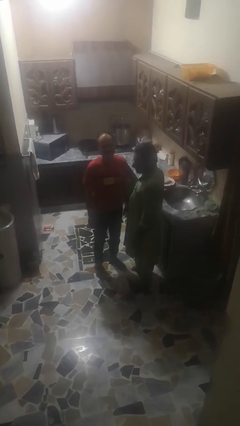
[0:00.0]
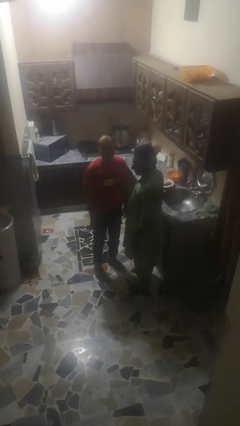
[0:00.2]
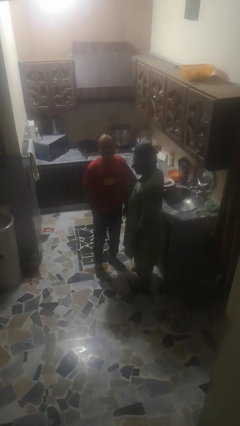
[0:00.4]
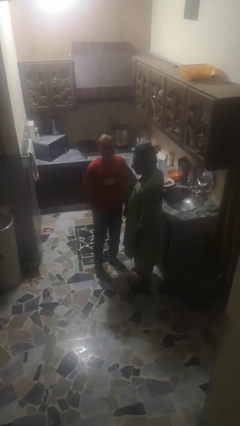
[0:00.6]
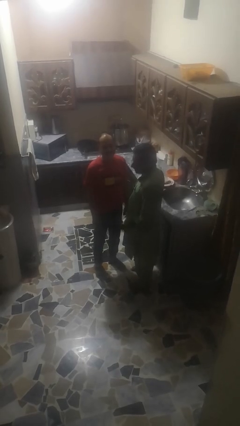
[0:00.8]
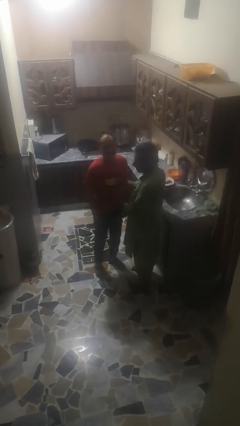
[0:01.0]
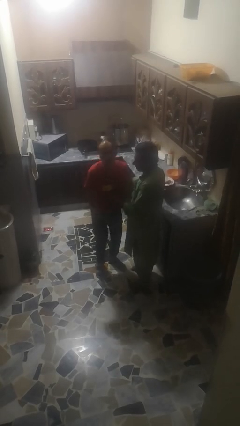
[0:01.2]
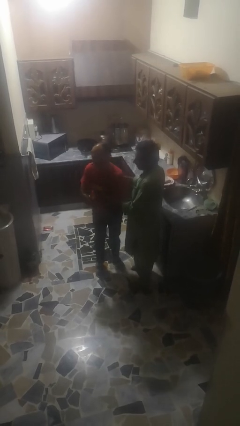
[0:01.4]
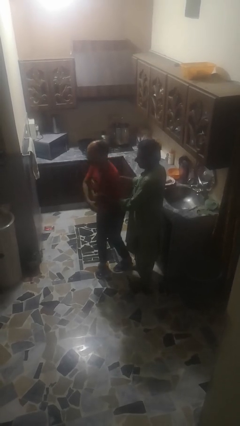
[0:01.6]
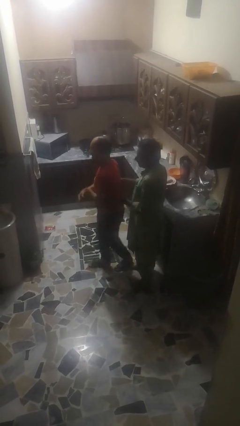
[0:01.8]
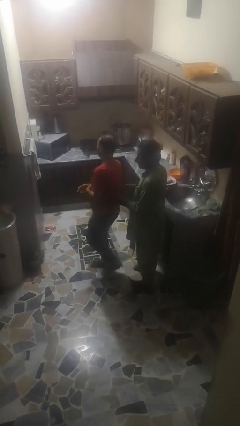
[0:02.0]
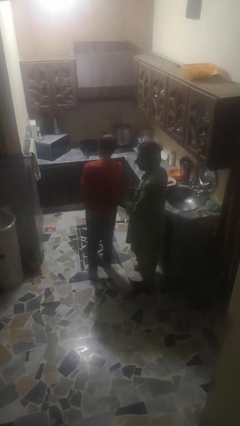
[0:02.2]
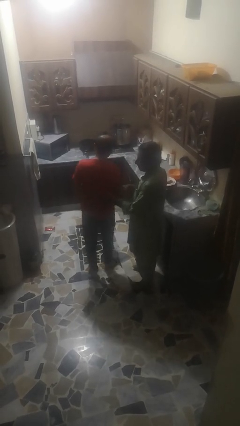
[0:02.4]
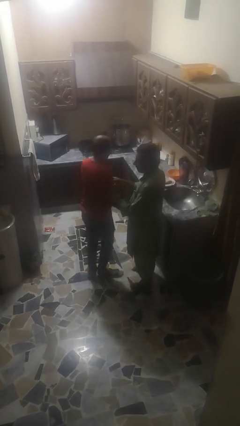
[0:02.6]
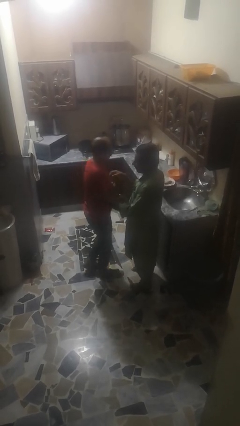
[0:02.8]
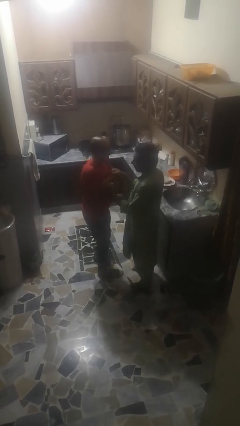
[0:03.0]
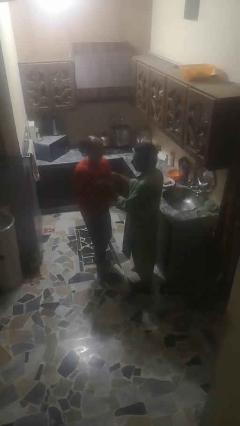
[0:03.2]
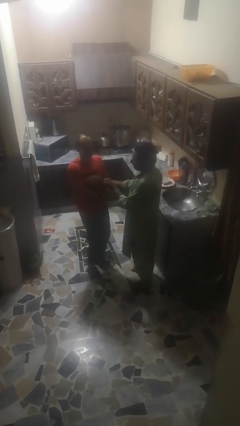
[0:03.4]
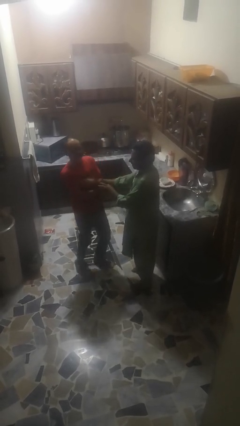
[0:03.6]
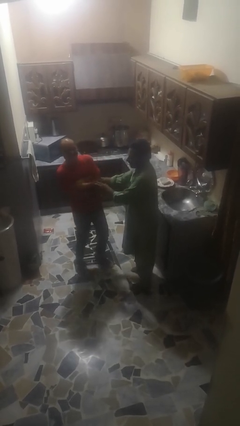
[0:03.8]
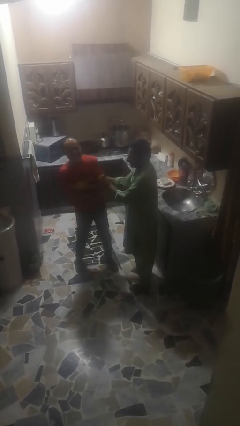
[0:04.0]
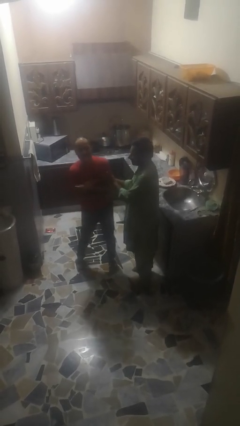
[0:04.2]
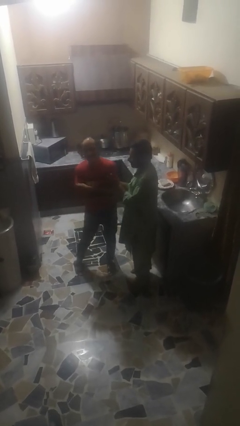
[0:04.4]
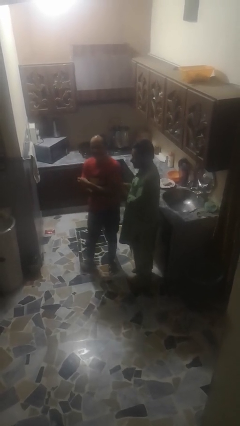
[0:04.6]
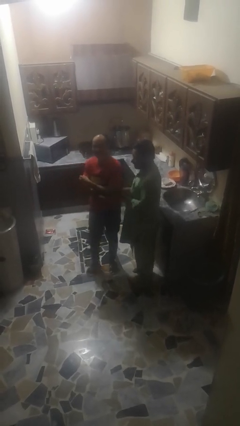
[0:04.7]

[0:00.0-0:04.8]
person tickles person

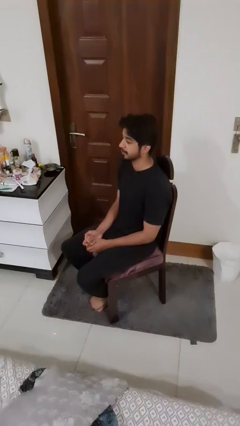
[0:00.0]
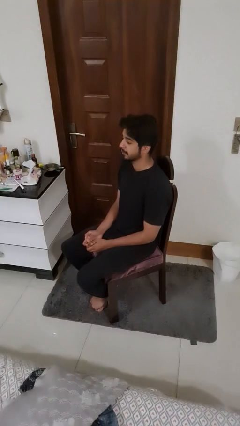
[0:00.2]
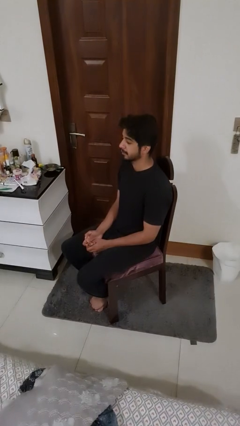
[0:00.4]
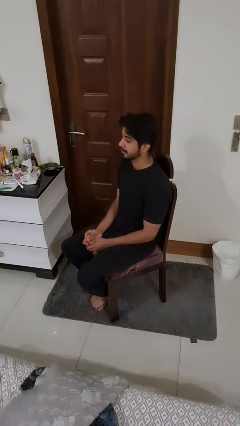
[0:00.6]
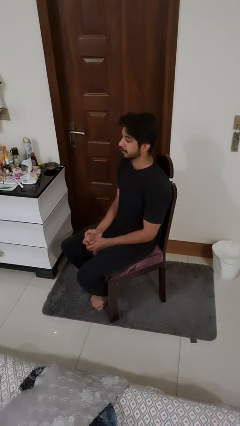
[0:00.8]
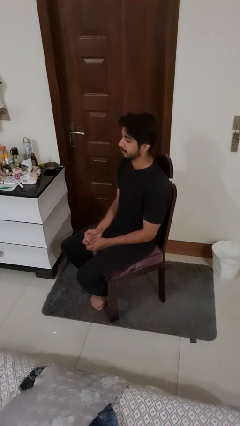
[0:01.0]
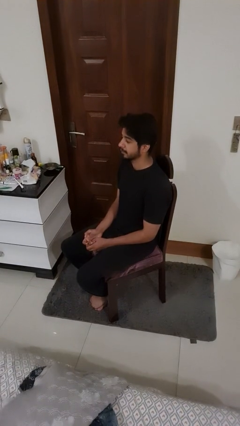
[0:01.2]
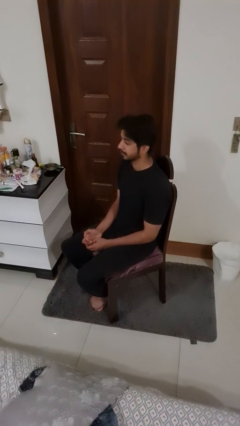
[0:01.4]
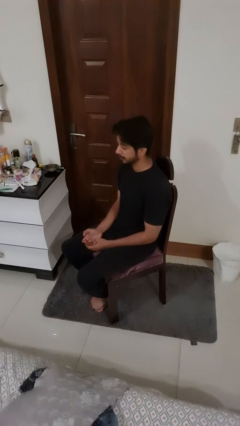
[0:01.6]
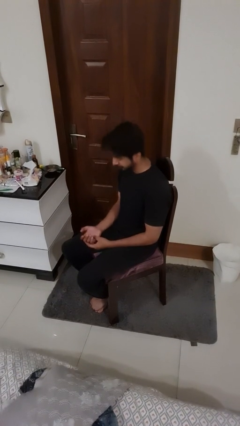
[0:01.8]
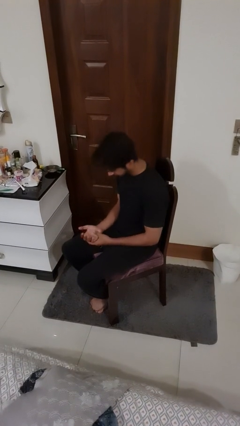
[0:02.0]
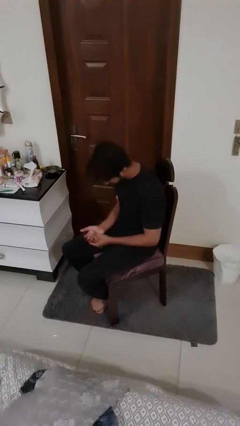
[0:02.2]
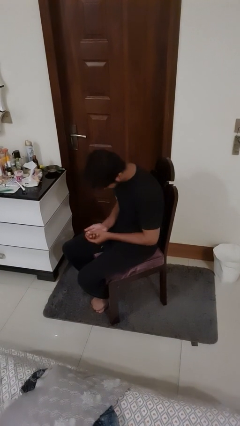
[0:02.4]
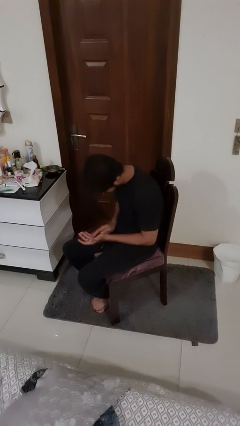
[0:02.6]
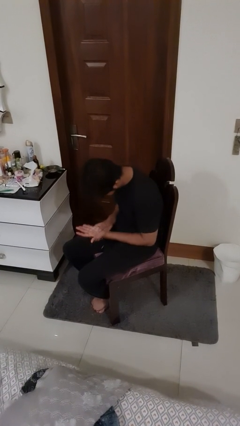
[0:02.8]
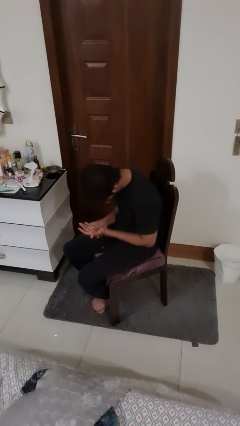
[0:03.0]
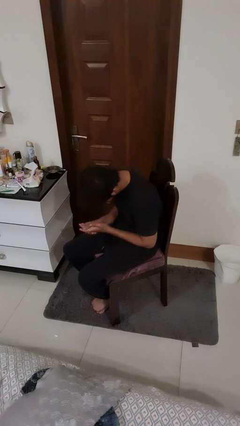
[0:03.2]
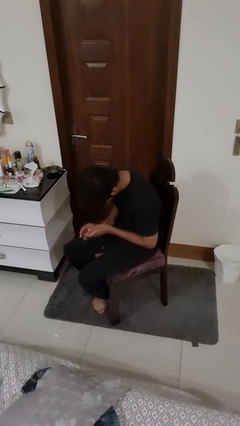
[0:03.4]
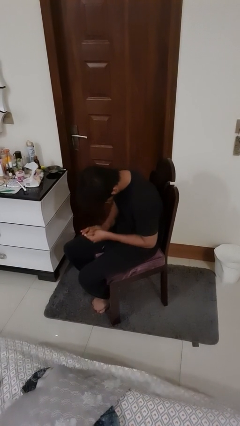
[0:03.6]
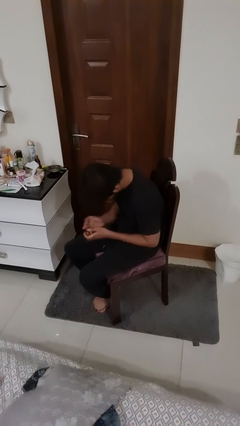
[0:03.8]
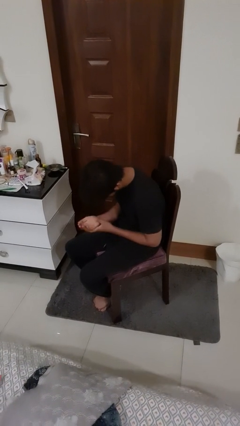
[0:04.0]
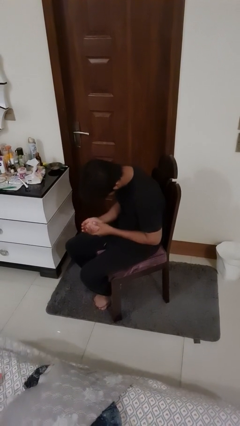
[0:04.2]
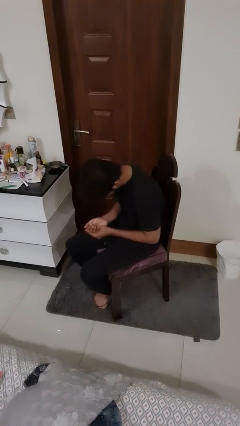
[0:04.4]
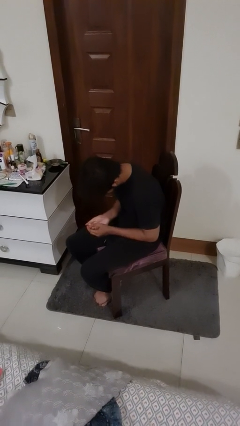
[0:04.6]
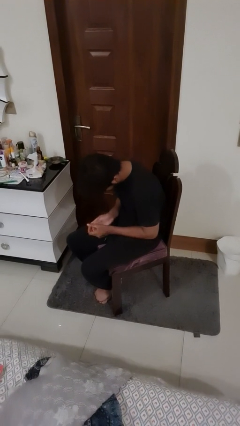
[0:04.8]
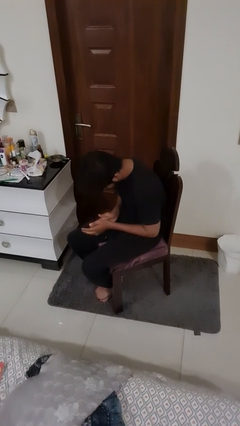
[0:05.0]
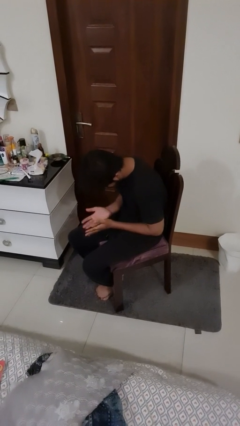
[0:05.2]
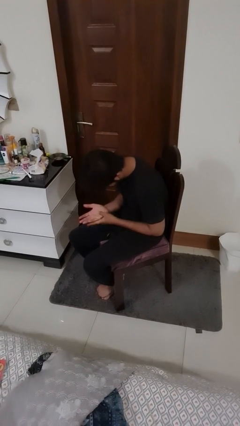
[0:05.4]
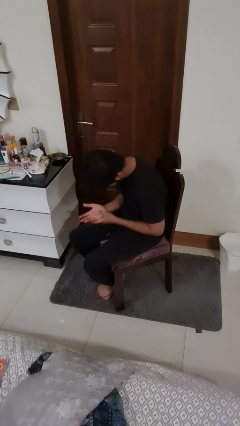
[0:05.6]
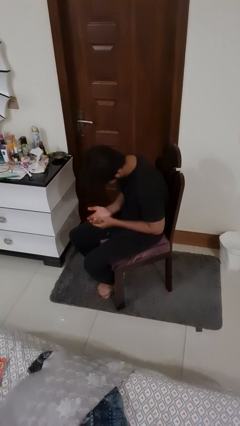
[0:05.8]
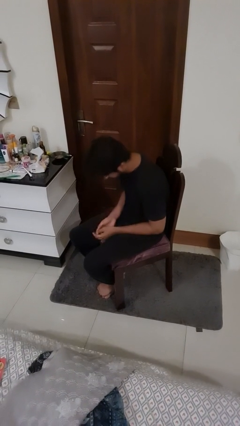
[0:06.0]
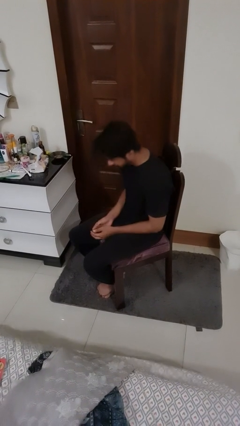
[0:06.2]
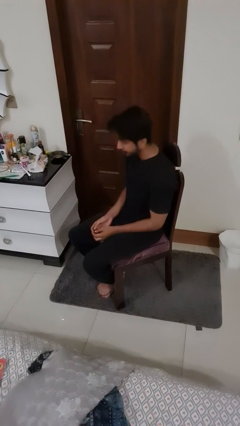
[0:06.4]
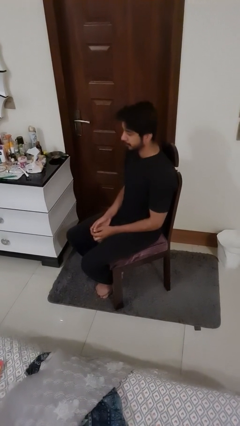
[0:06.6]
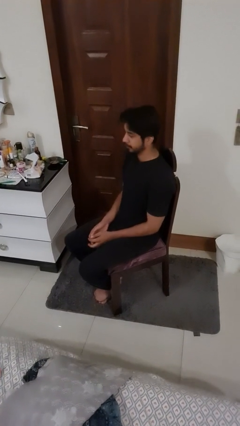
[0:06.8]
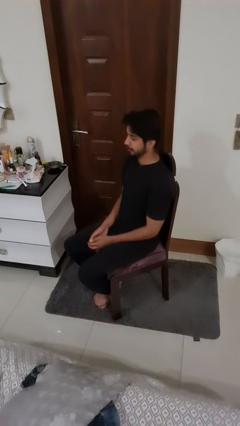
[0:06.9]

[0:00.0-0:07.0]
person looks at hands in lap

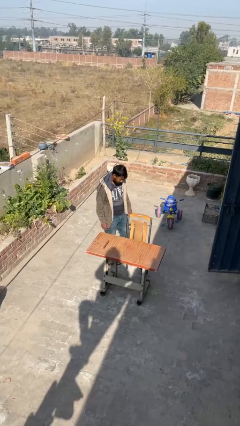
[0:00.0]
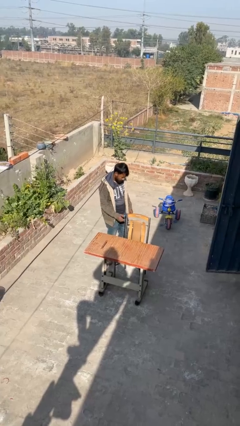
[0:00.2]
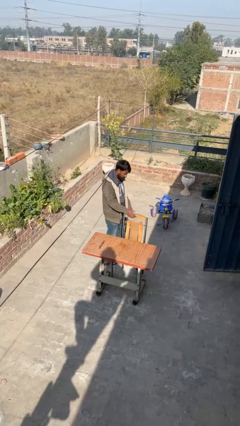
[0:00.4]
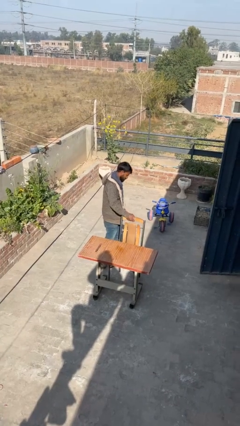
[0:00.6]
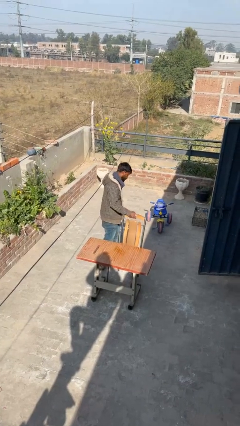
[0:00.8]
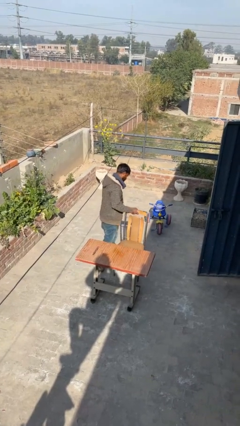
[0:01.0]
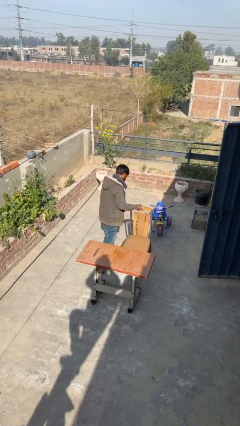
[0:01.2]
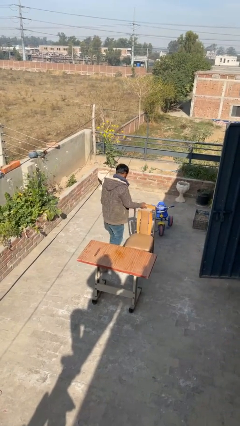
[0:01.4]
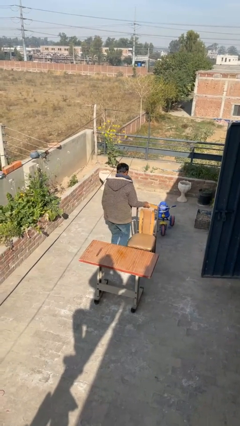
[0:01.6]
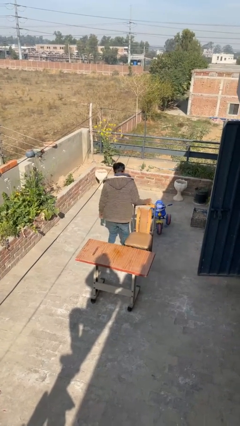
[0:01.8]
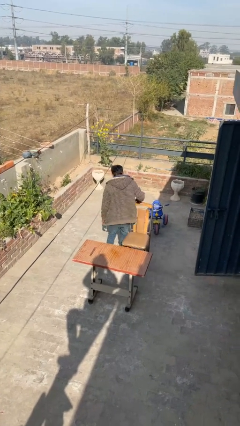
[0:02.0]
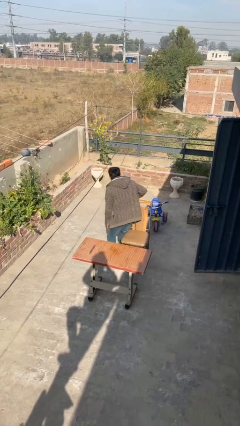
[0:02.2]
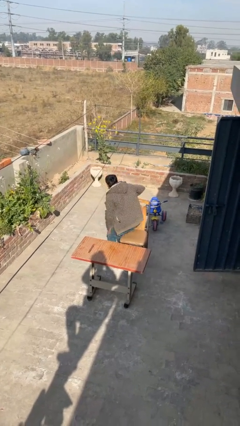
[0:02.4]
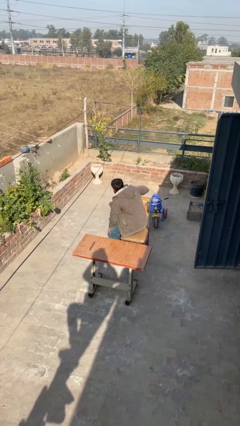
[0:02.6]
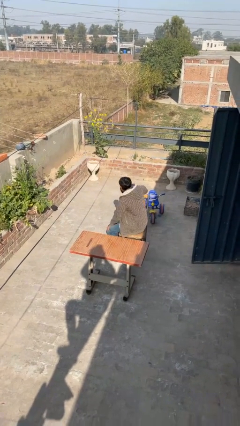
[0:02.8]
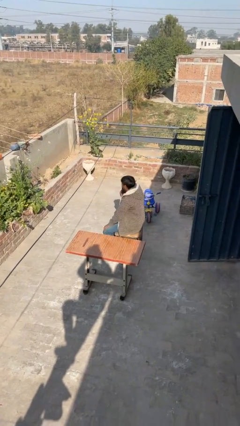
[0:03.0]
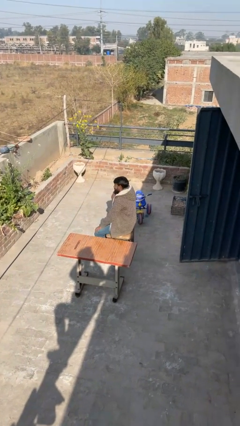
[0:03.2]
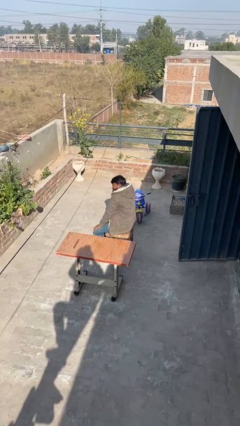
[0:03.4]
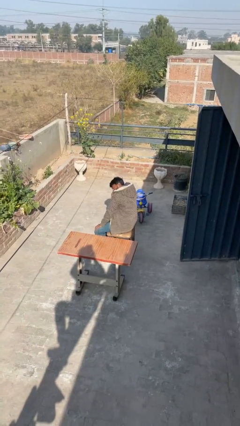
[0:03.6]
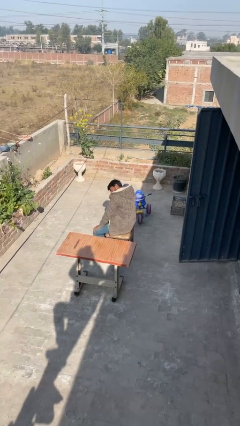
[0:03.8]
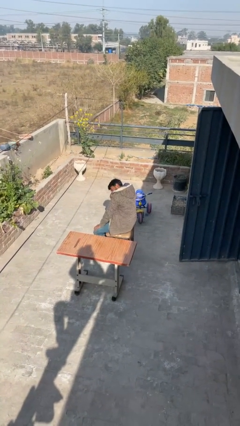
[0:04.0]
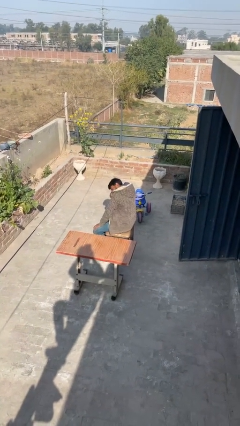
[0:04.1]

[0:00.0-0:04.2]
person sits down

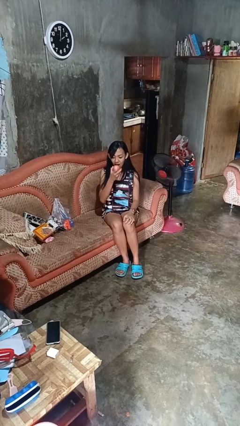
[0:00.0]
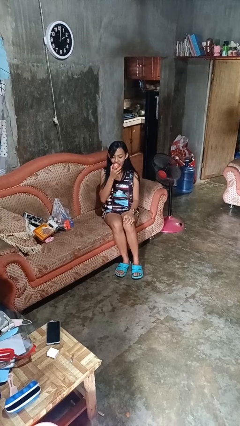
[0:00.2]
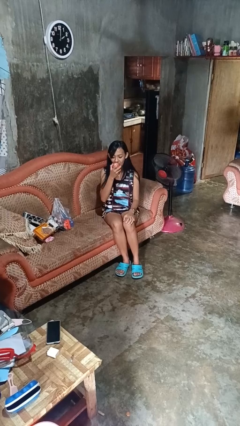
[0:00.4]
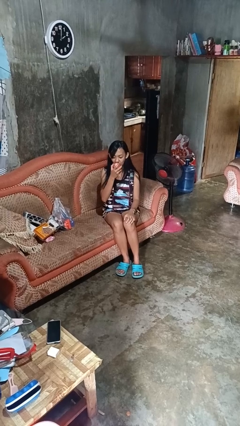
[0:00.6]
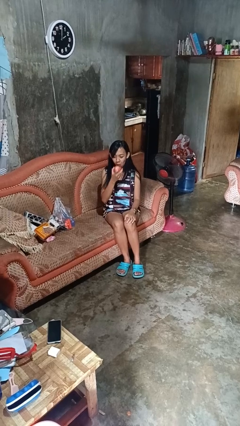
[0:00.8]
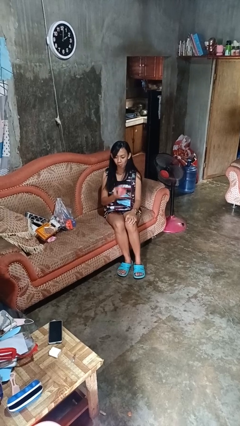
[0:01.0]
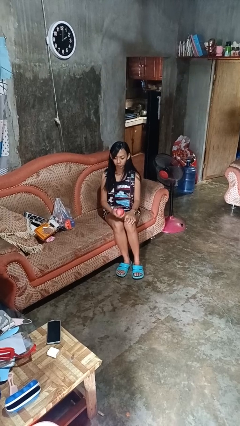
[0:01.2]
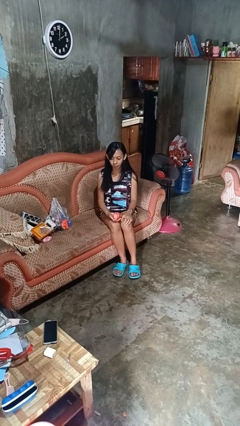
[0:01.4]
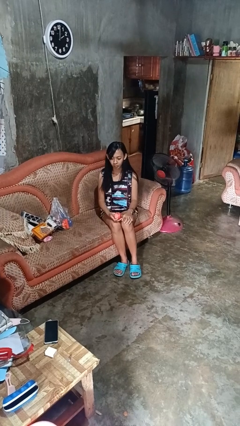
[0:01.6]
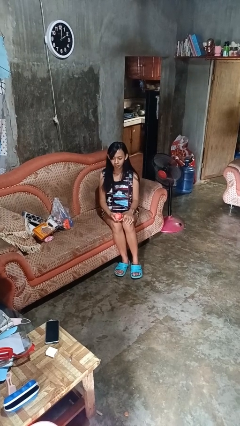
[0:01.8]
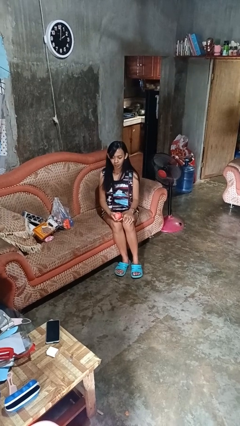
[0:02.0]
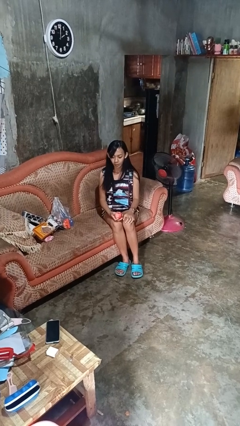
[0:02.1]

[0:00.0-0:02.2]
person eats apple
